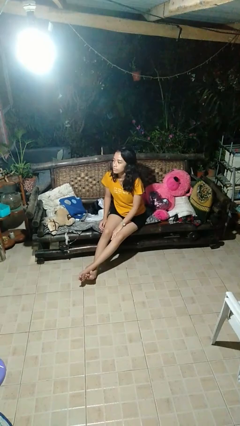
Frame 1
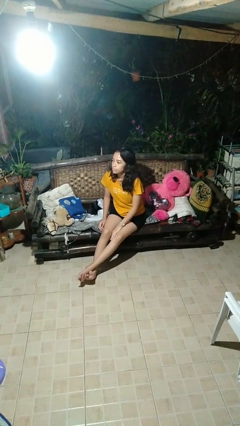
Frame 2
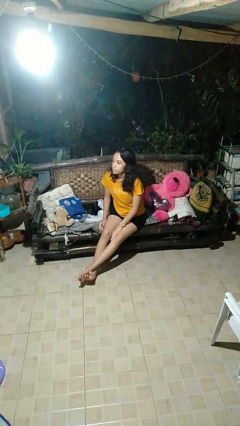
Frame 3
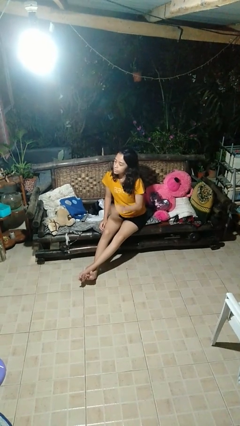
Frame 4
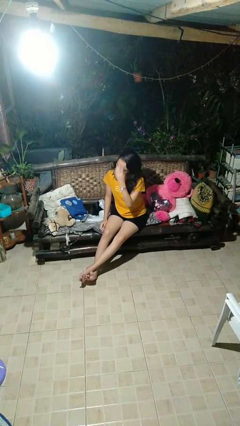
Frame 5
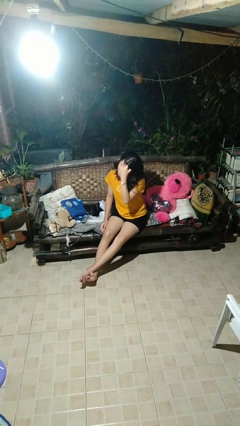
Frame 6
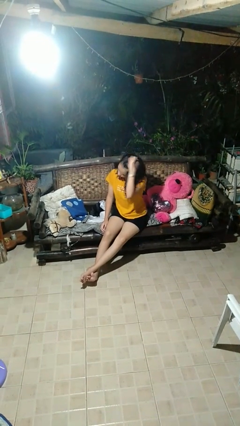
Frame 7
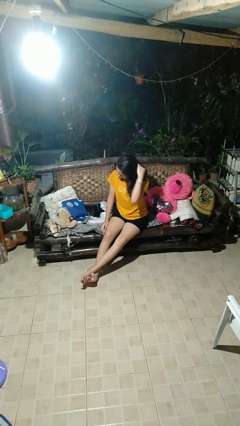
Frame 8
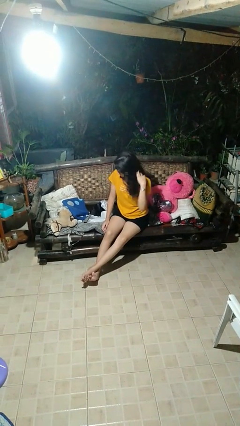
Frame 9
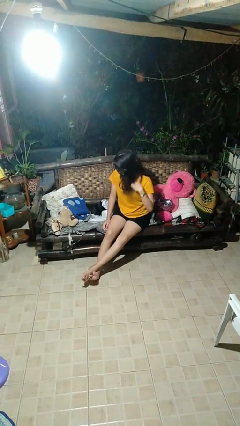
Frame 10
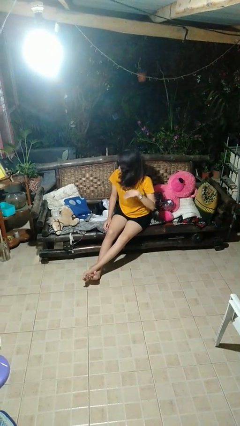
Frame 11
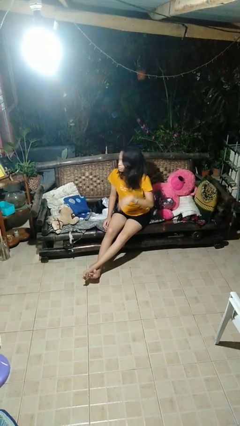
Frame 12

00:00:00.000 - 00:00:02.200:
person strokes hair

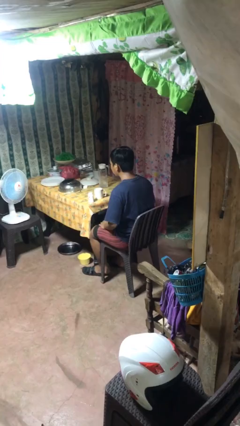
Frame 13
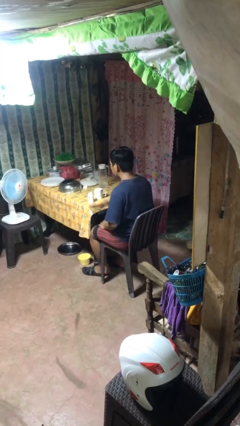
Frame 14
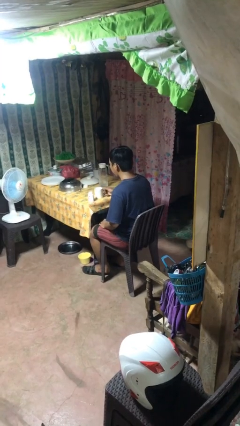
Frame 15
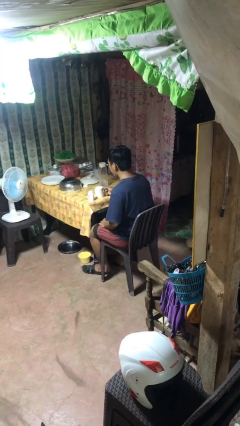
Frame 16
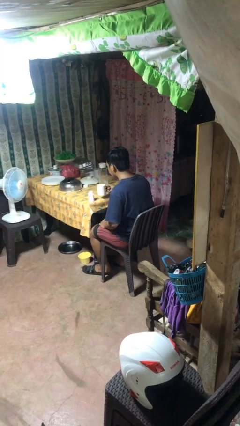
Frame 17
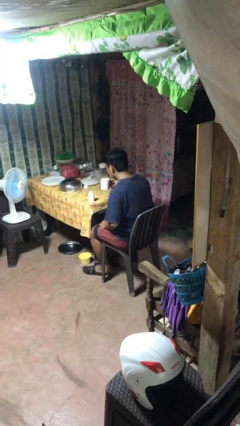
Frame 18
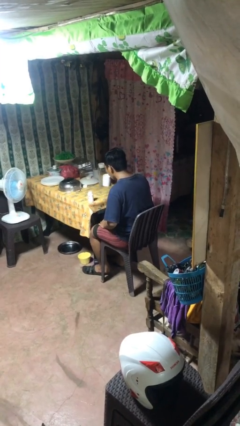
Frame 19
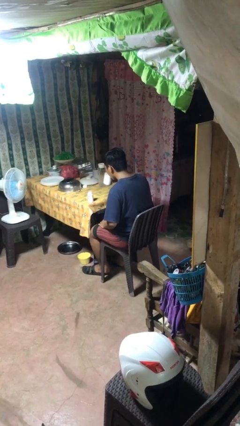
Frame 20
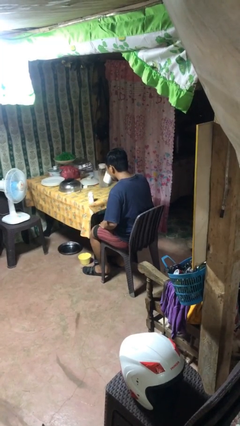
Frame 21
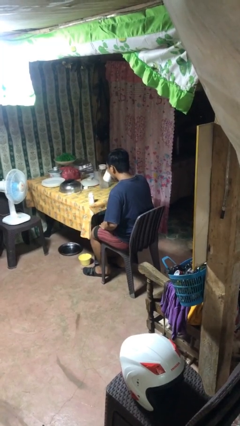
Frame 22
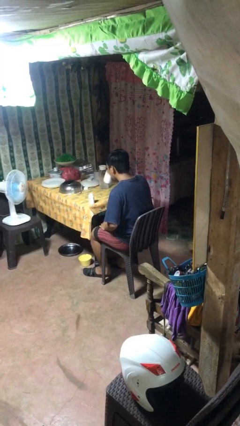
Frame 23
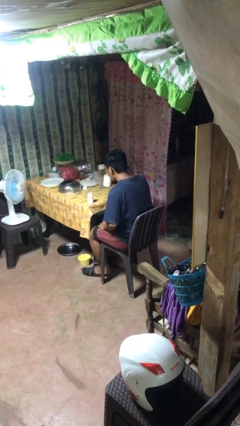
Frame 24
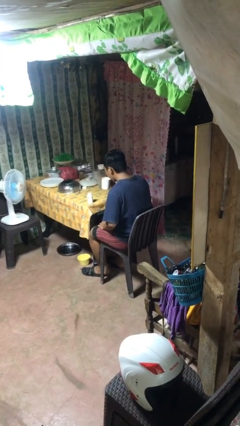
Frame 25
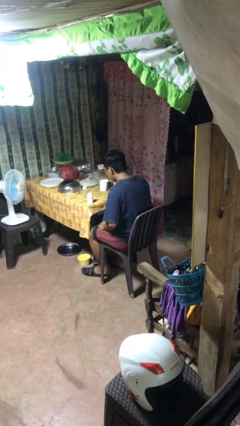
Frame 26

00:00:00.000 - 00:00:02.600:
person drinks from cup

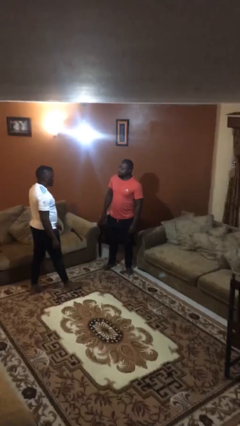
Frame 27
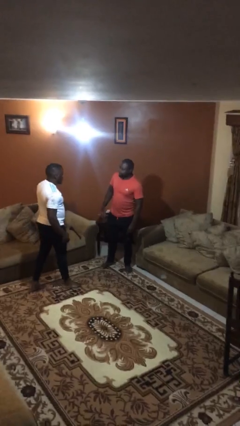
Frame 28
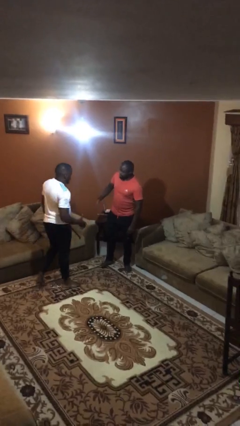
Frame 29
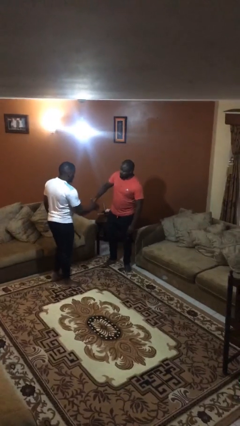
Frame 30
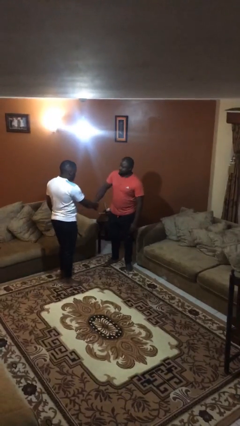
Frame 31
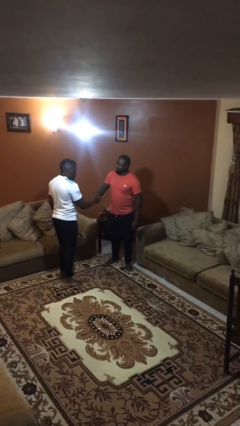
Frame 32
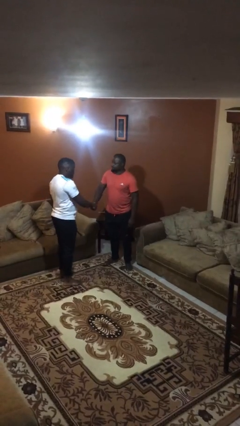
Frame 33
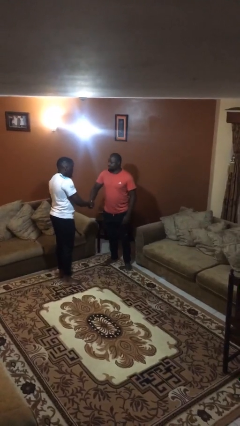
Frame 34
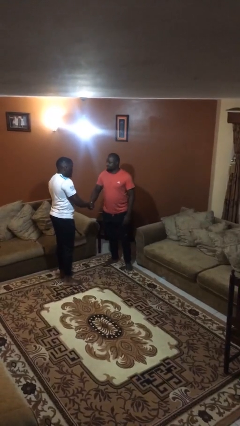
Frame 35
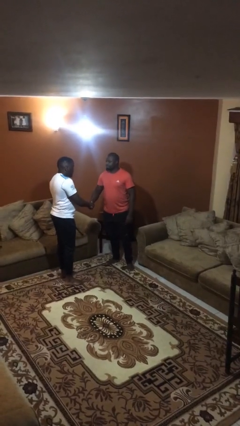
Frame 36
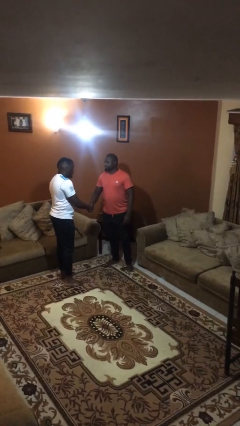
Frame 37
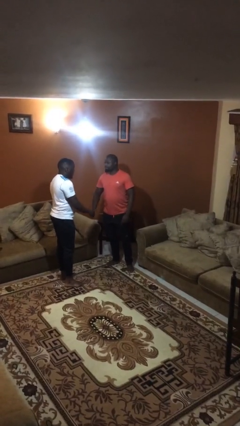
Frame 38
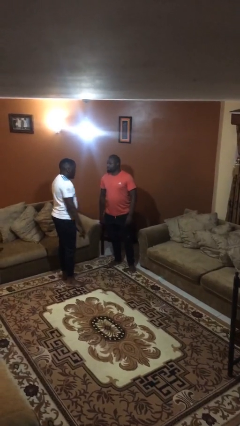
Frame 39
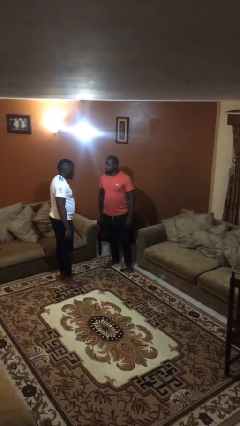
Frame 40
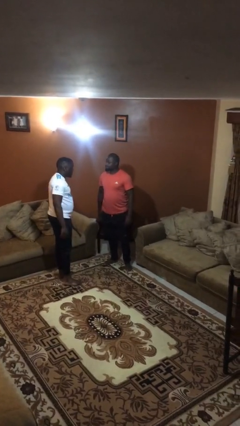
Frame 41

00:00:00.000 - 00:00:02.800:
person shakes hand

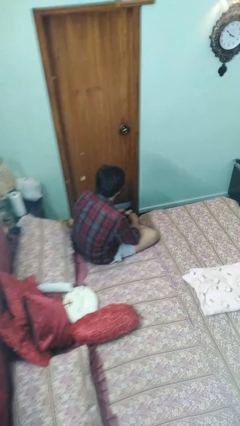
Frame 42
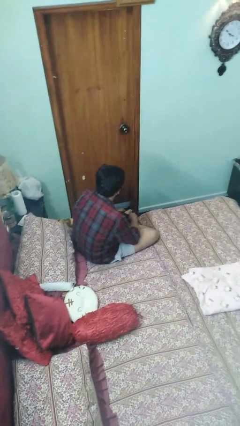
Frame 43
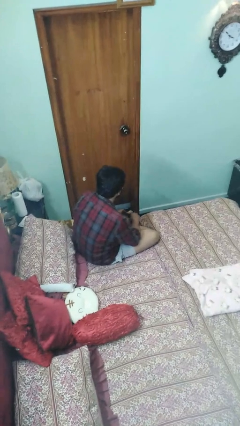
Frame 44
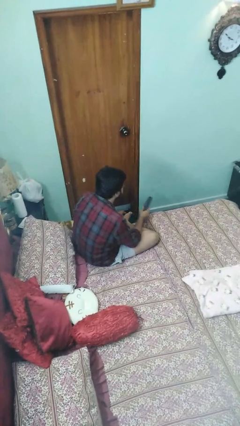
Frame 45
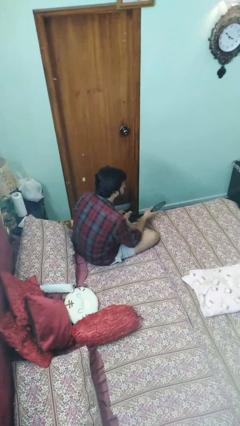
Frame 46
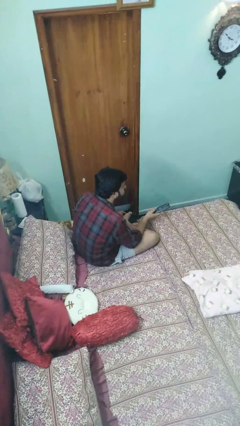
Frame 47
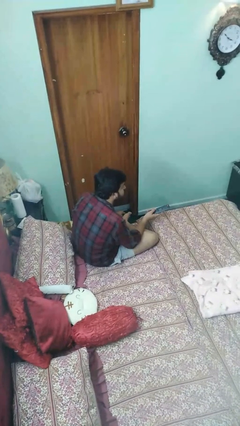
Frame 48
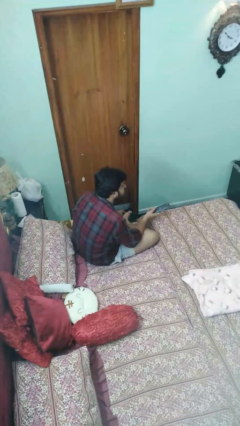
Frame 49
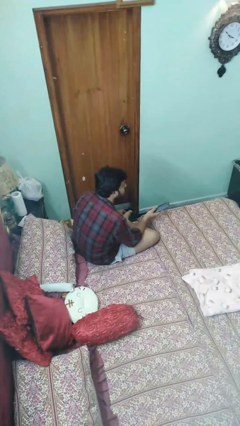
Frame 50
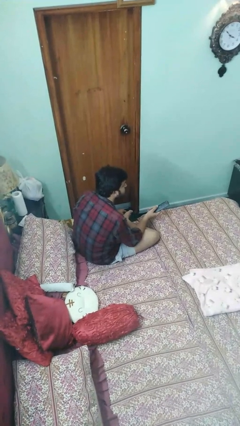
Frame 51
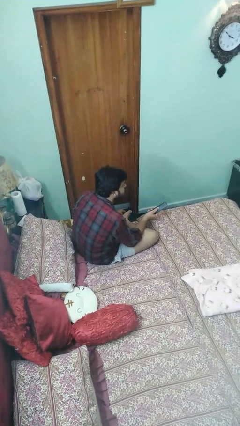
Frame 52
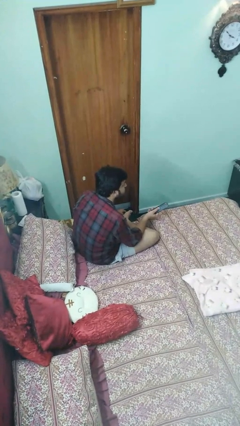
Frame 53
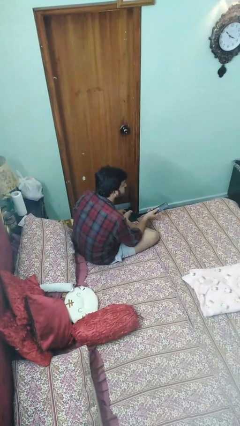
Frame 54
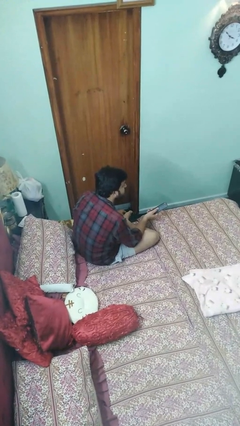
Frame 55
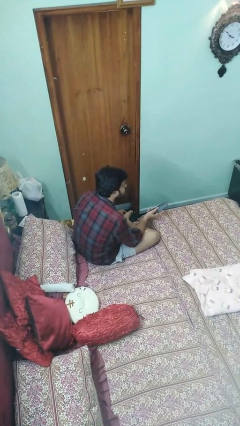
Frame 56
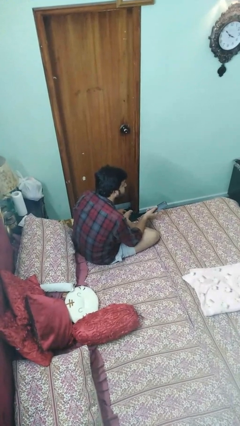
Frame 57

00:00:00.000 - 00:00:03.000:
person uses television remote

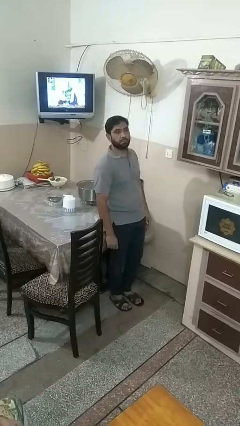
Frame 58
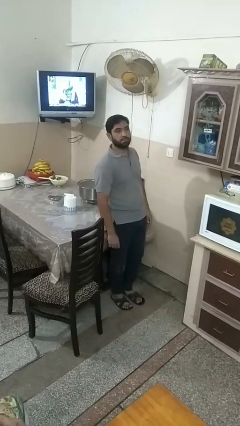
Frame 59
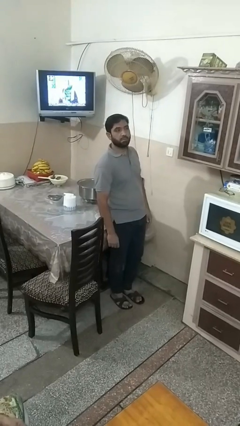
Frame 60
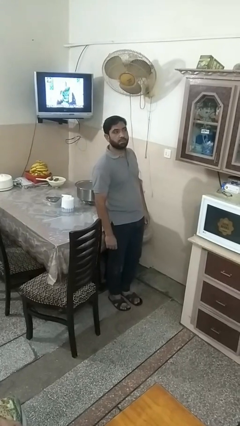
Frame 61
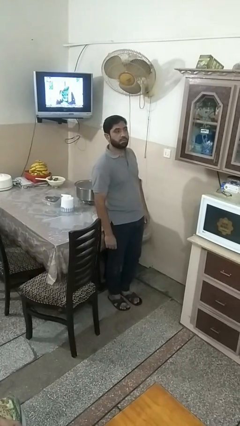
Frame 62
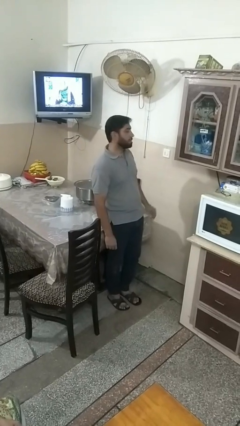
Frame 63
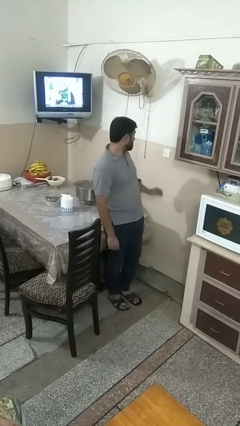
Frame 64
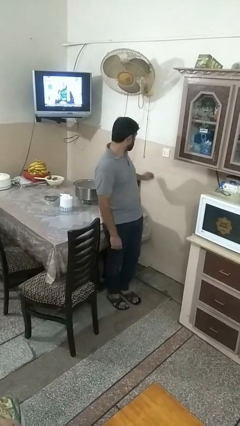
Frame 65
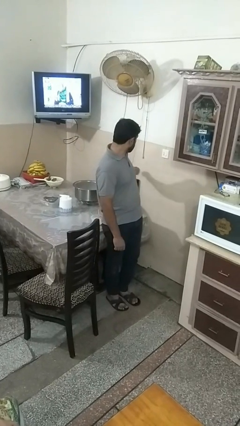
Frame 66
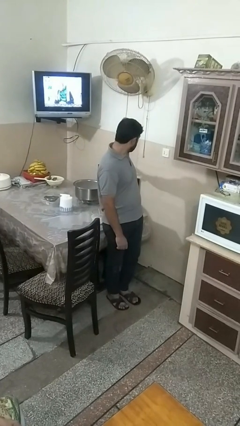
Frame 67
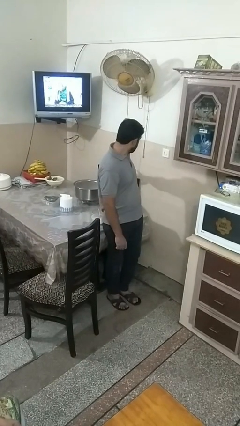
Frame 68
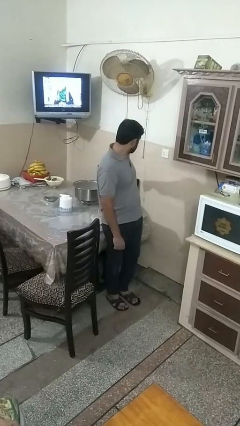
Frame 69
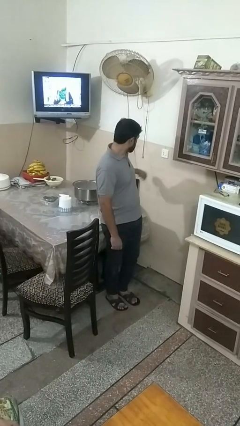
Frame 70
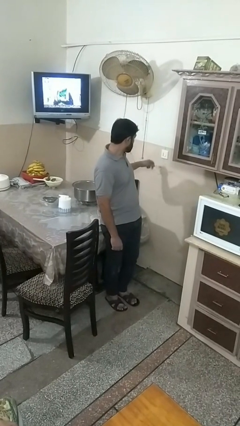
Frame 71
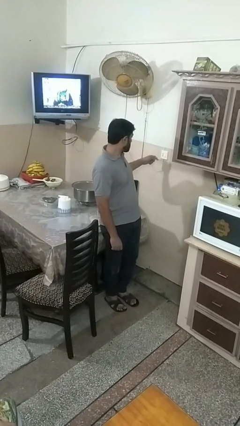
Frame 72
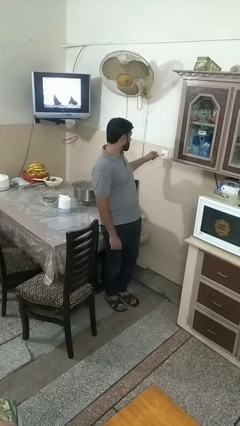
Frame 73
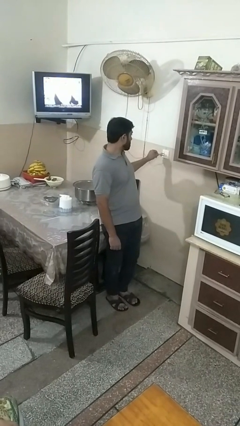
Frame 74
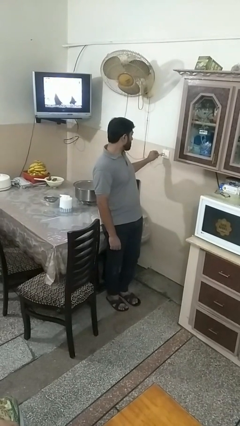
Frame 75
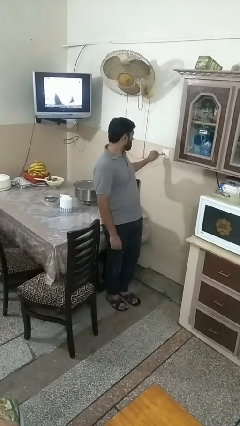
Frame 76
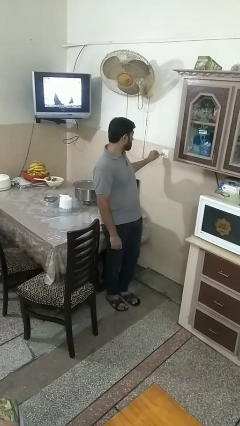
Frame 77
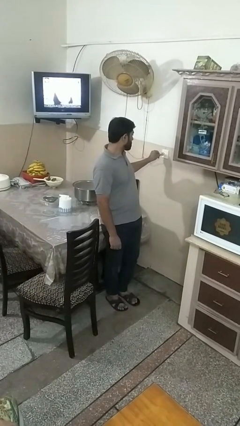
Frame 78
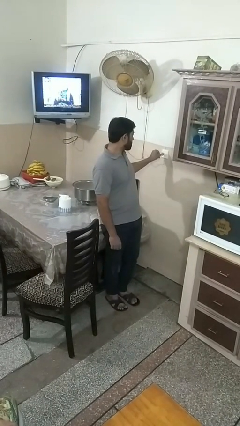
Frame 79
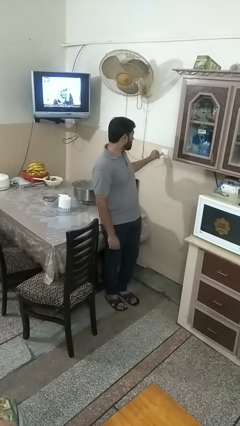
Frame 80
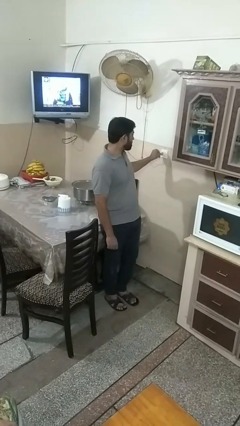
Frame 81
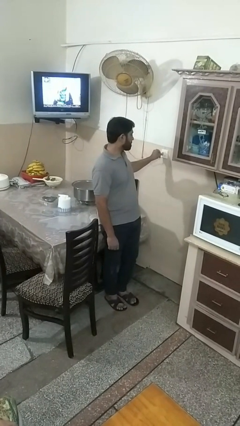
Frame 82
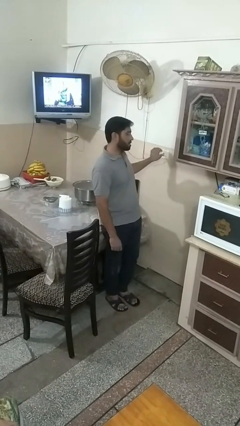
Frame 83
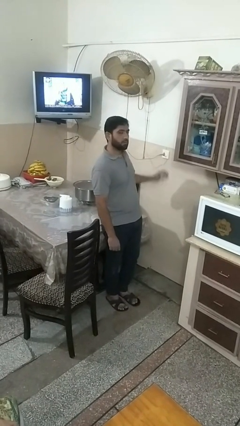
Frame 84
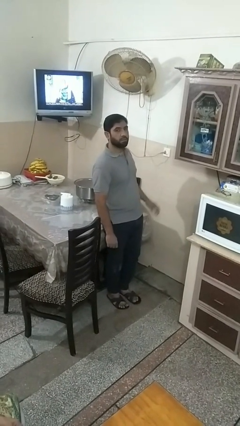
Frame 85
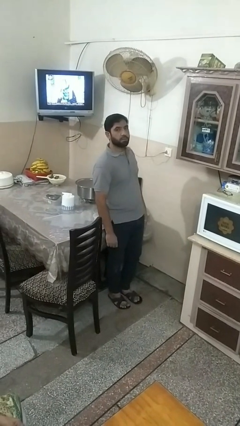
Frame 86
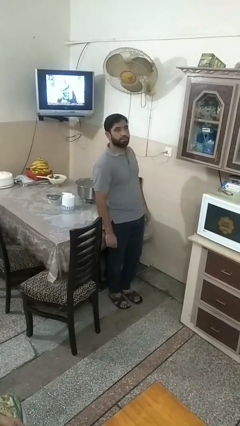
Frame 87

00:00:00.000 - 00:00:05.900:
person plugs into electrical socket

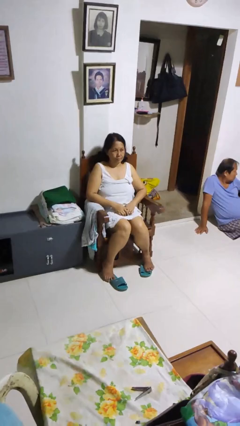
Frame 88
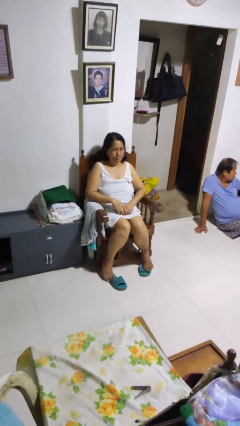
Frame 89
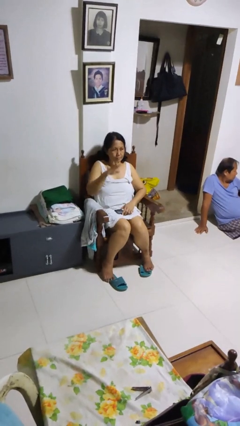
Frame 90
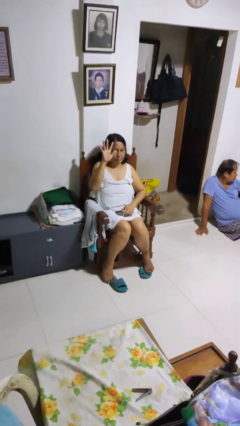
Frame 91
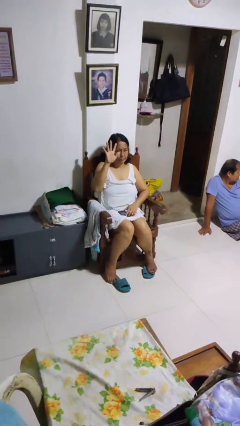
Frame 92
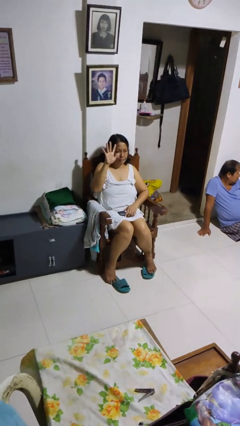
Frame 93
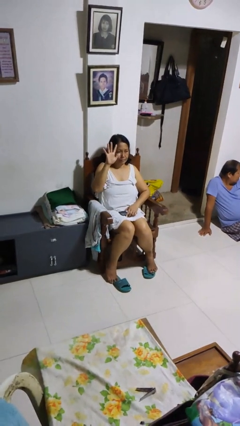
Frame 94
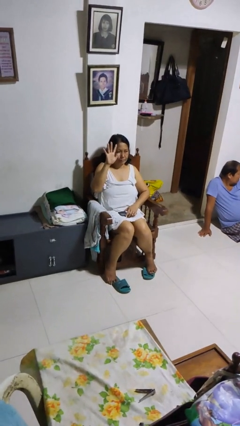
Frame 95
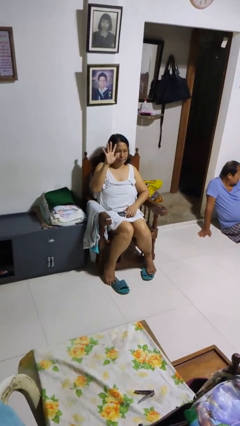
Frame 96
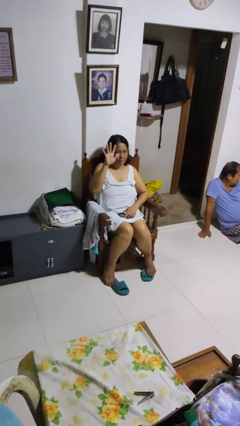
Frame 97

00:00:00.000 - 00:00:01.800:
person gestures number five
